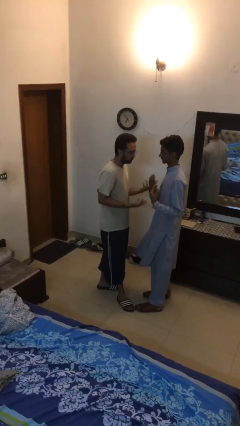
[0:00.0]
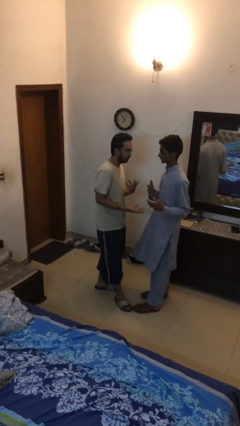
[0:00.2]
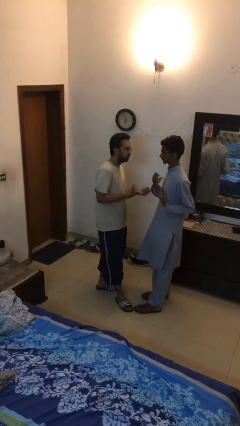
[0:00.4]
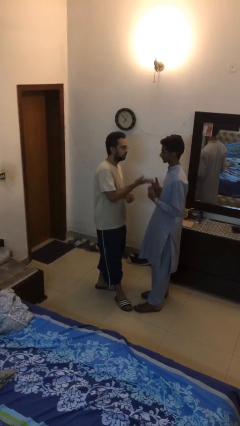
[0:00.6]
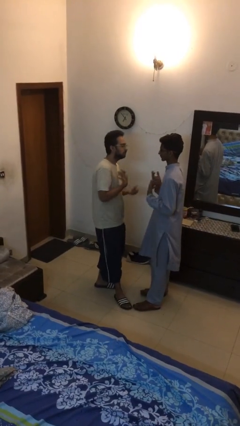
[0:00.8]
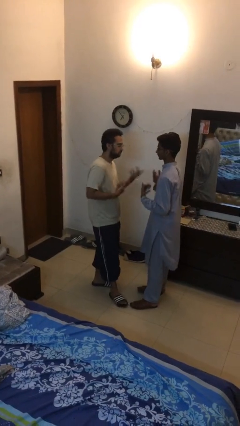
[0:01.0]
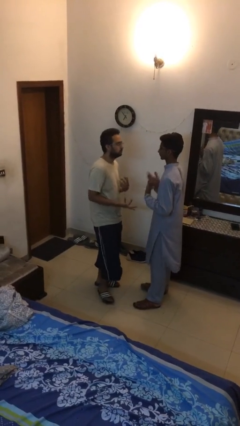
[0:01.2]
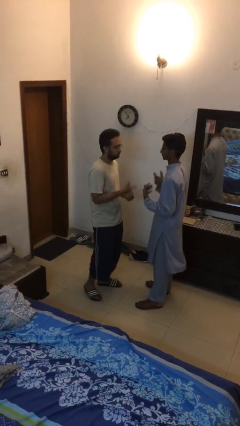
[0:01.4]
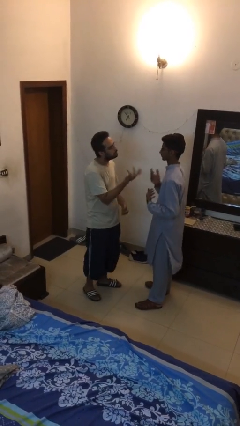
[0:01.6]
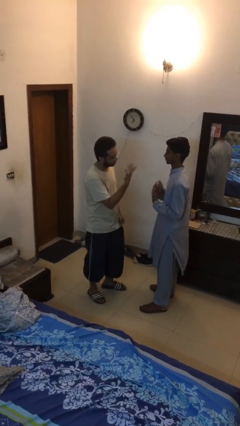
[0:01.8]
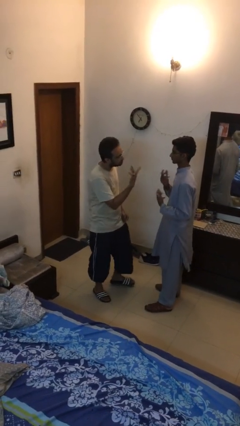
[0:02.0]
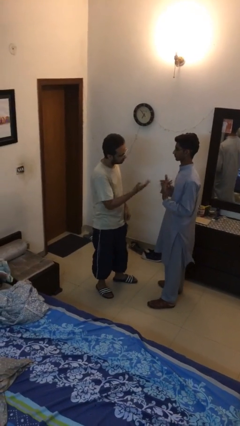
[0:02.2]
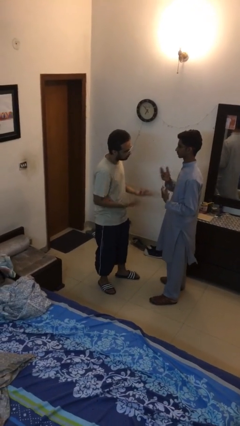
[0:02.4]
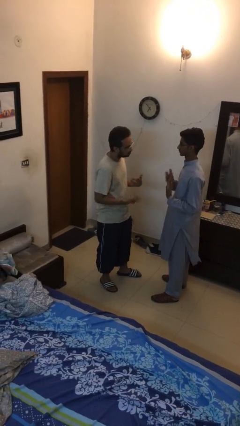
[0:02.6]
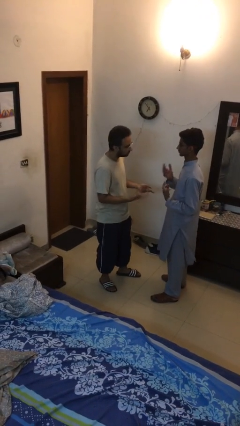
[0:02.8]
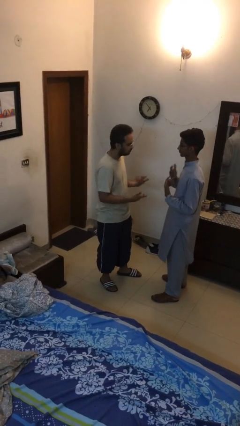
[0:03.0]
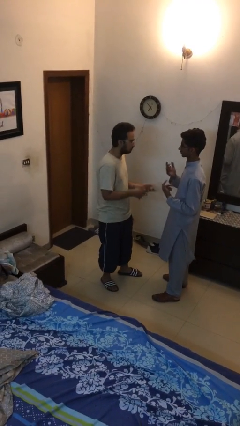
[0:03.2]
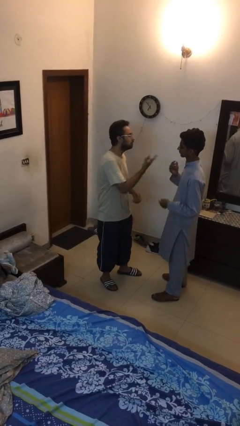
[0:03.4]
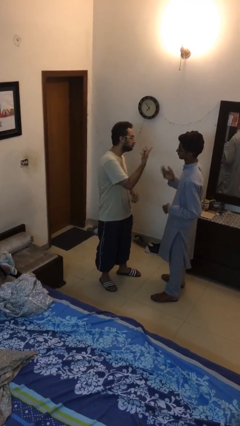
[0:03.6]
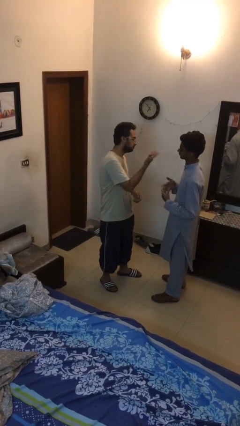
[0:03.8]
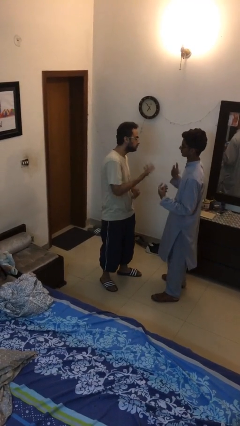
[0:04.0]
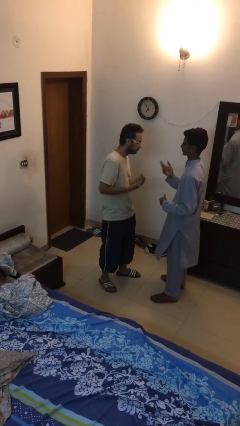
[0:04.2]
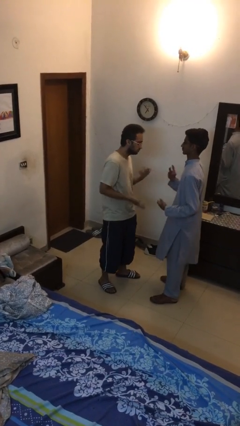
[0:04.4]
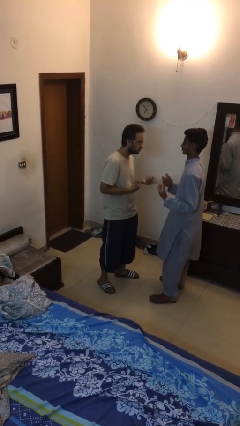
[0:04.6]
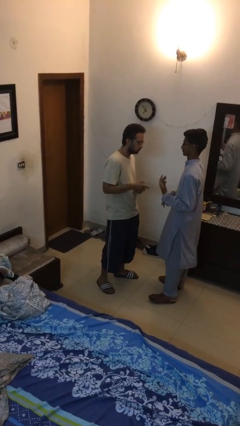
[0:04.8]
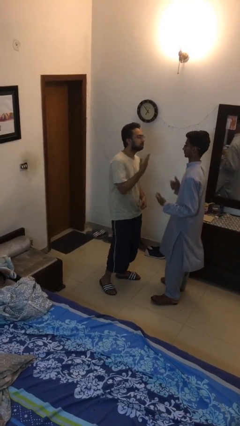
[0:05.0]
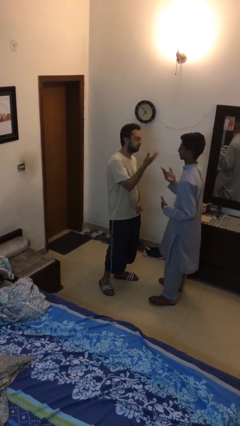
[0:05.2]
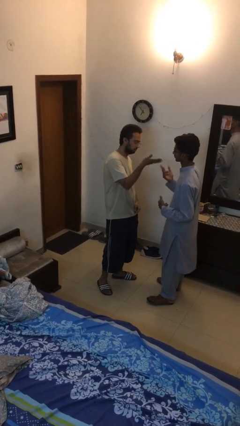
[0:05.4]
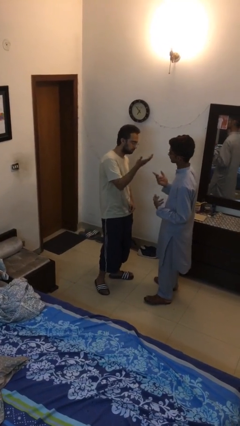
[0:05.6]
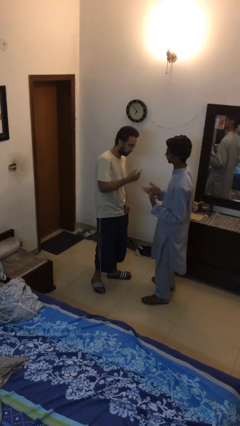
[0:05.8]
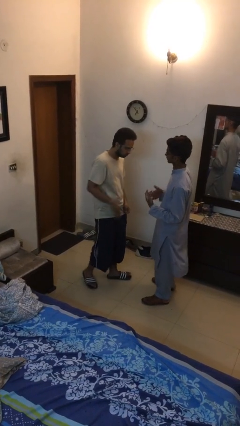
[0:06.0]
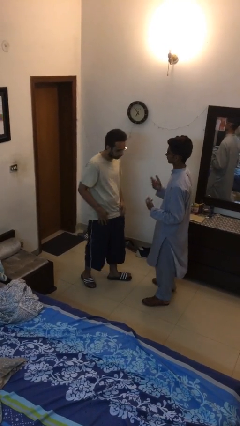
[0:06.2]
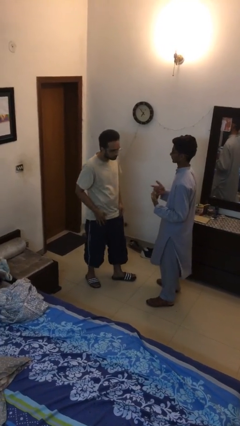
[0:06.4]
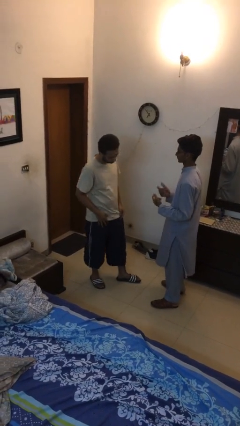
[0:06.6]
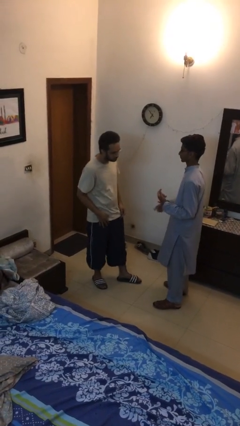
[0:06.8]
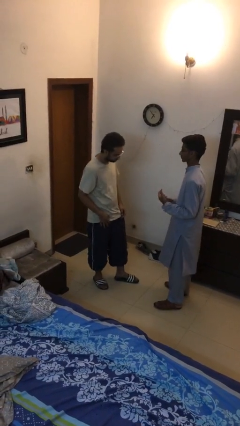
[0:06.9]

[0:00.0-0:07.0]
person talks to person

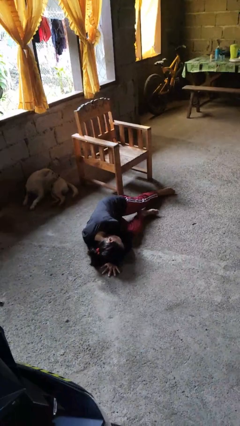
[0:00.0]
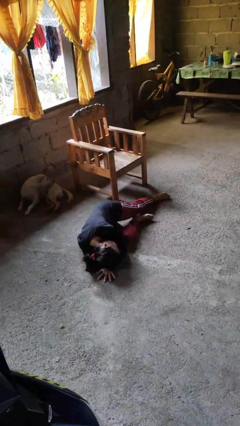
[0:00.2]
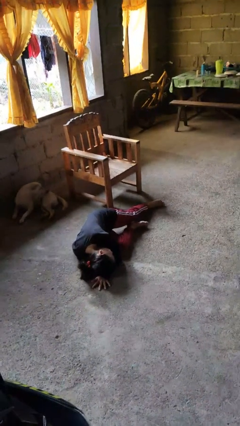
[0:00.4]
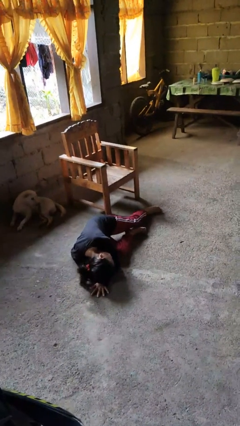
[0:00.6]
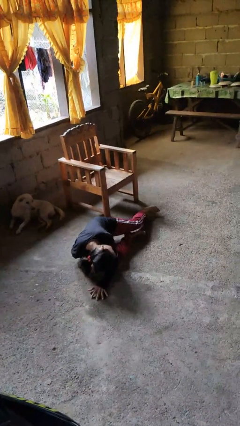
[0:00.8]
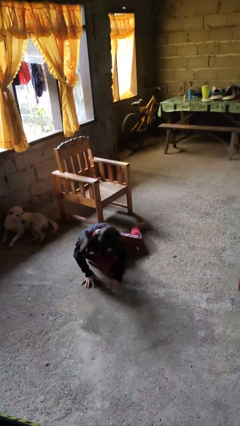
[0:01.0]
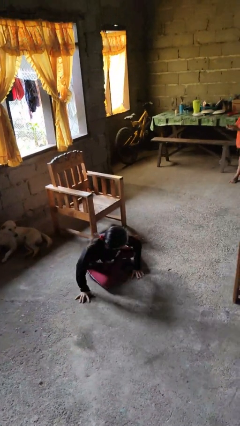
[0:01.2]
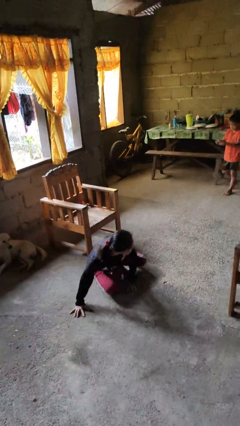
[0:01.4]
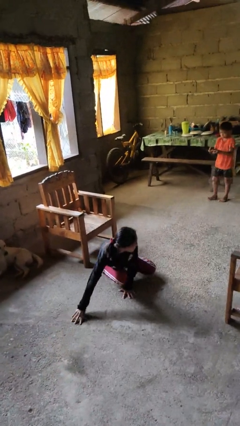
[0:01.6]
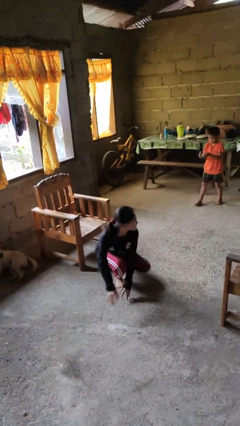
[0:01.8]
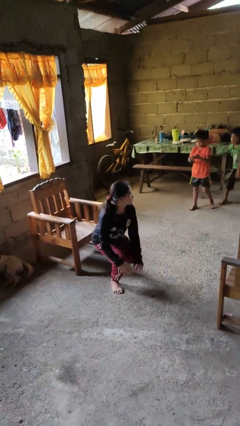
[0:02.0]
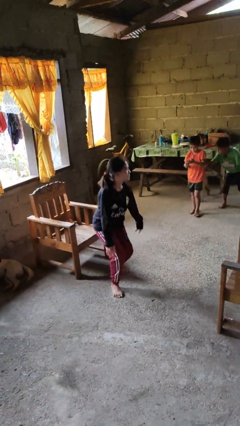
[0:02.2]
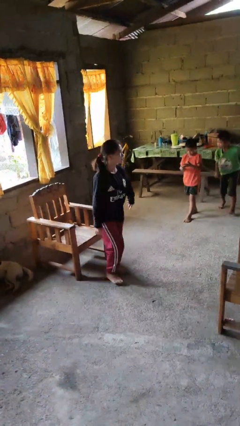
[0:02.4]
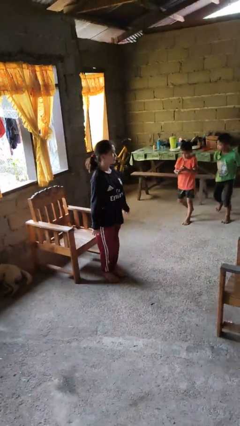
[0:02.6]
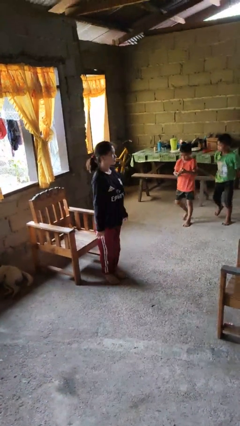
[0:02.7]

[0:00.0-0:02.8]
person stands up from floor

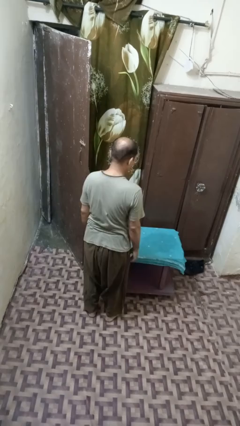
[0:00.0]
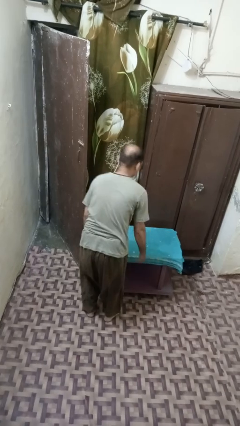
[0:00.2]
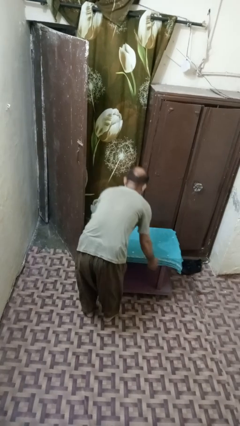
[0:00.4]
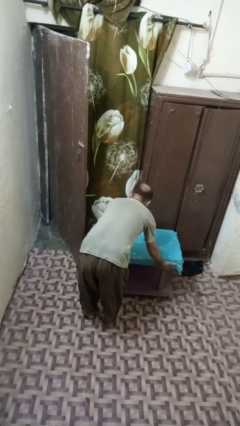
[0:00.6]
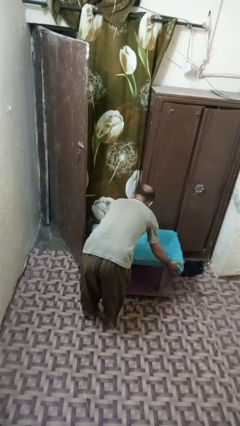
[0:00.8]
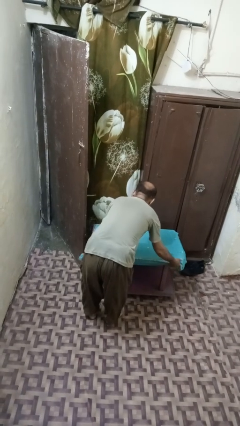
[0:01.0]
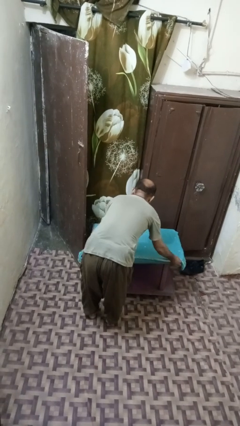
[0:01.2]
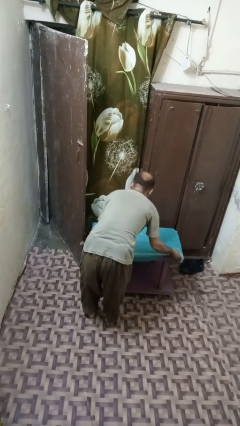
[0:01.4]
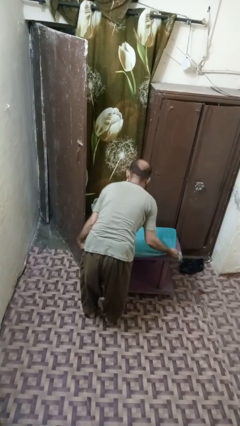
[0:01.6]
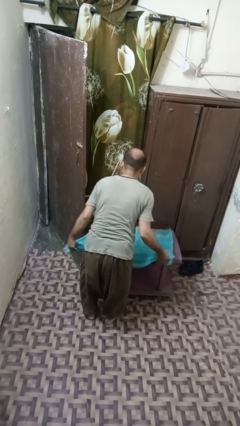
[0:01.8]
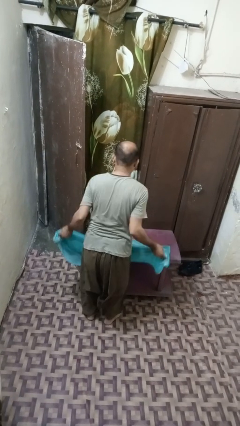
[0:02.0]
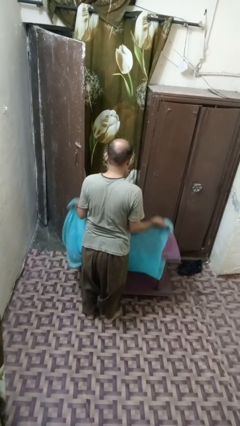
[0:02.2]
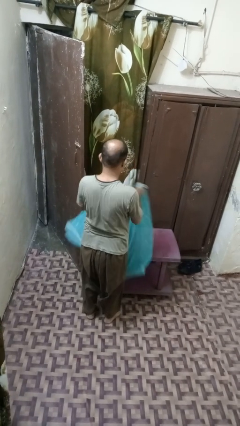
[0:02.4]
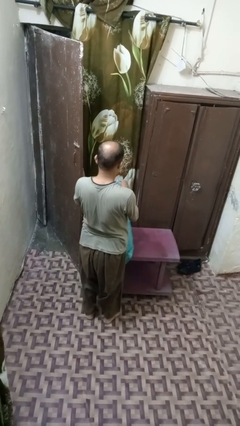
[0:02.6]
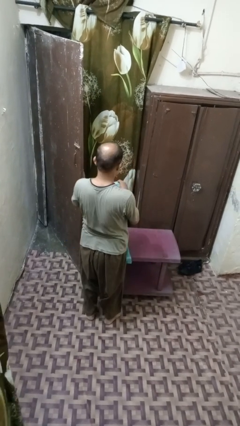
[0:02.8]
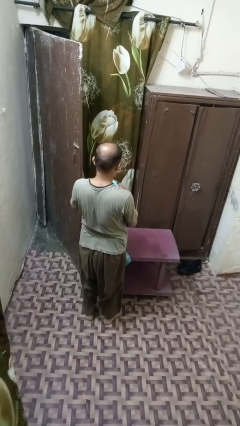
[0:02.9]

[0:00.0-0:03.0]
person folds tablecloth

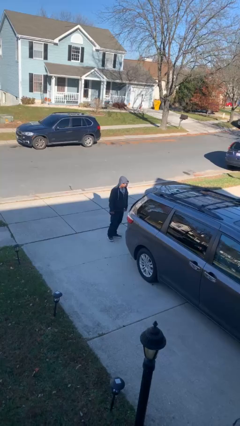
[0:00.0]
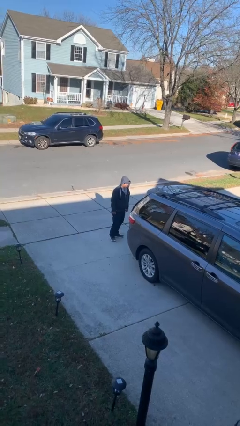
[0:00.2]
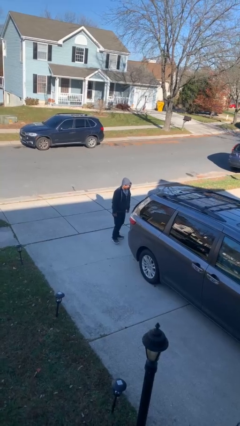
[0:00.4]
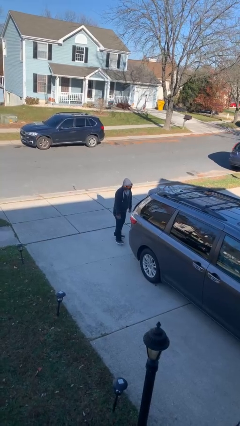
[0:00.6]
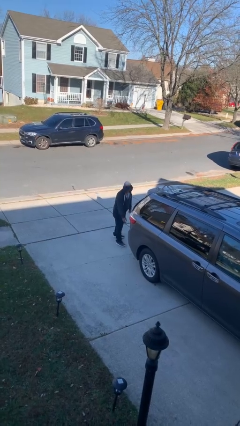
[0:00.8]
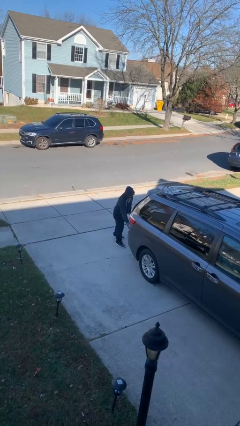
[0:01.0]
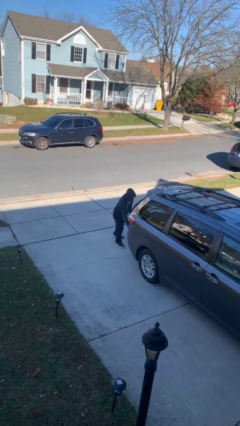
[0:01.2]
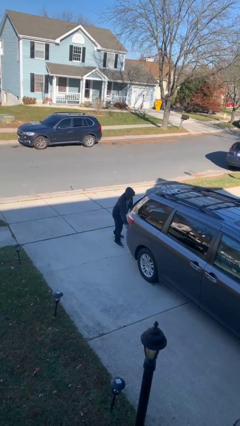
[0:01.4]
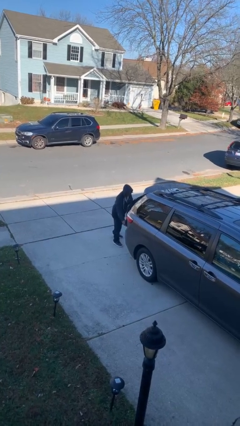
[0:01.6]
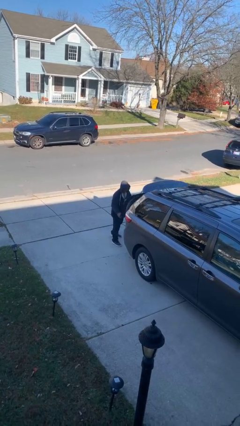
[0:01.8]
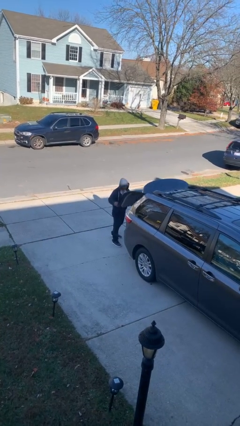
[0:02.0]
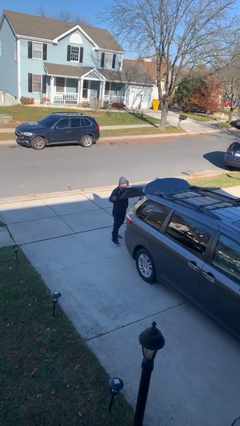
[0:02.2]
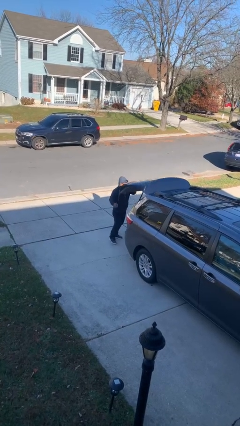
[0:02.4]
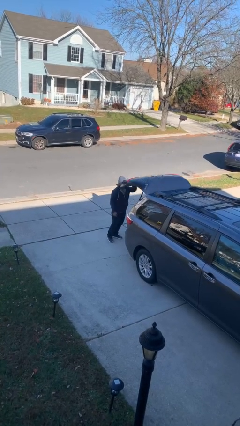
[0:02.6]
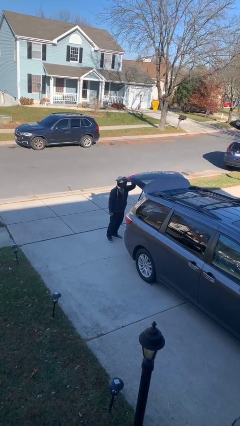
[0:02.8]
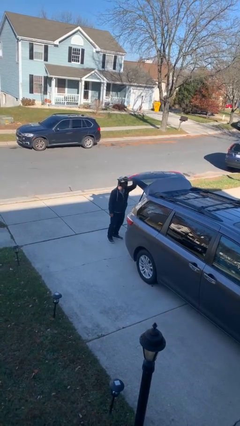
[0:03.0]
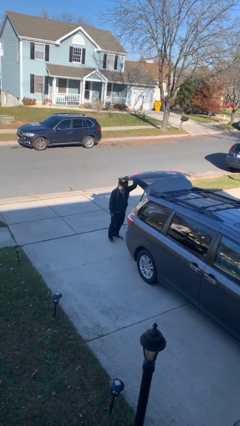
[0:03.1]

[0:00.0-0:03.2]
person opens car trunk

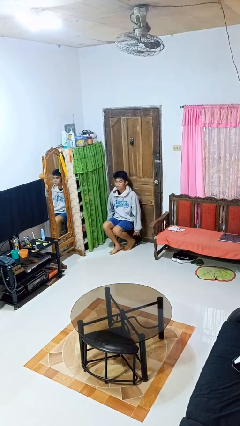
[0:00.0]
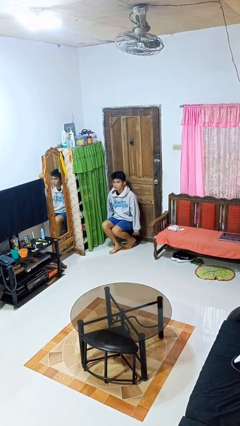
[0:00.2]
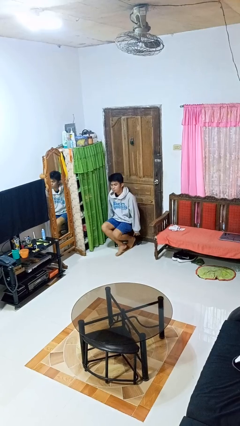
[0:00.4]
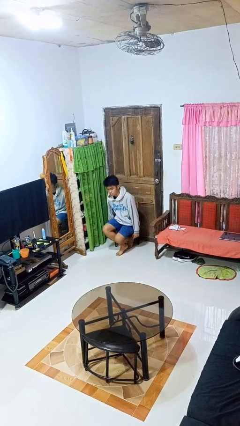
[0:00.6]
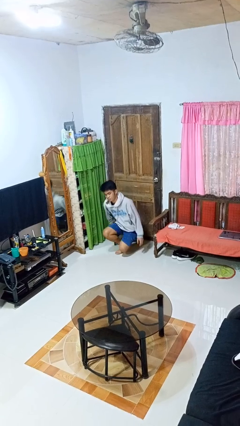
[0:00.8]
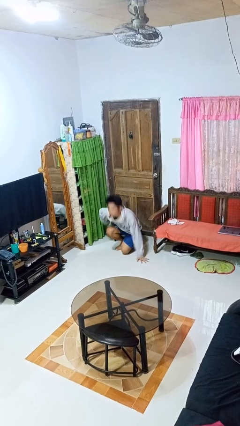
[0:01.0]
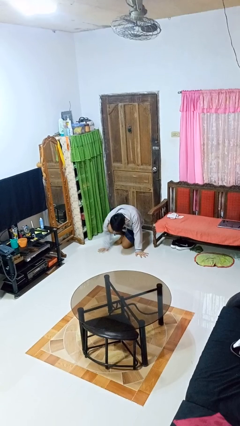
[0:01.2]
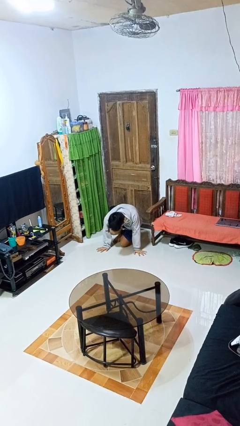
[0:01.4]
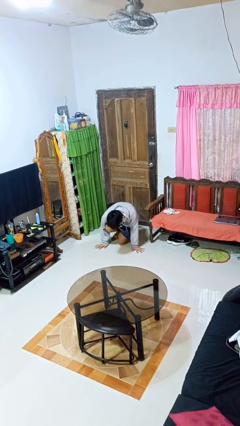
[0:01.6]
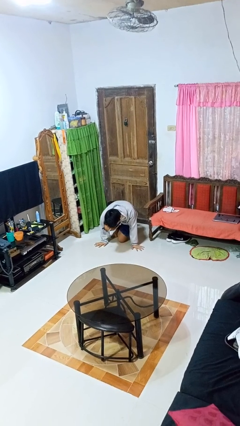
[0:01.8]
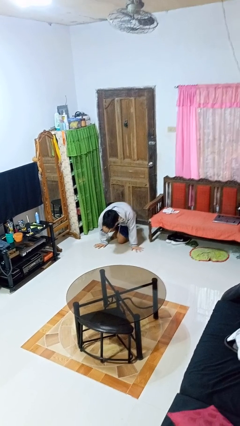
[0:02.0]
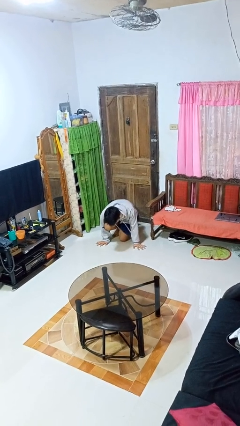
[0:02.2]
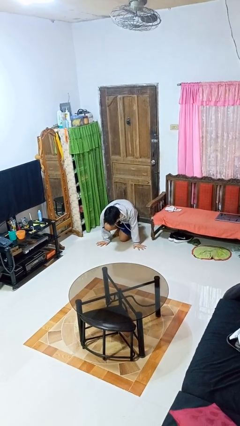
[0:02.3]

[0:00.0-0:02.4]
person falls from chair
